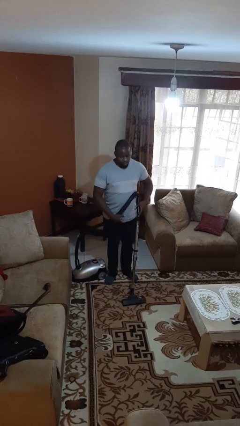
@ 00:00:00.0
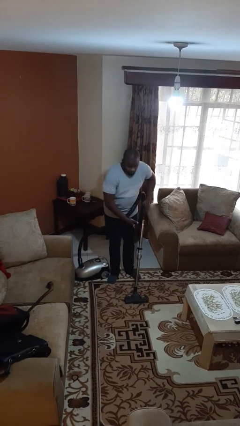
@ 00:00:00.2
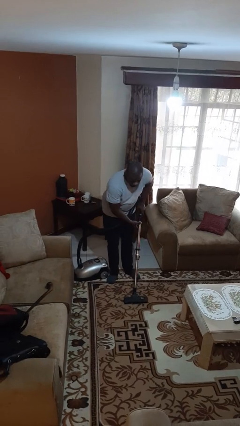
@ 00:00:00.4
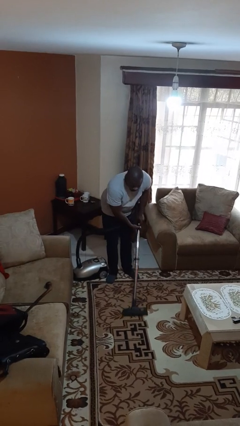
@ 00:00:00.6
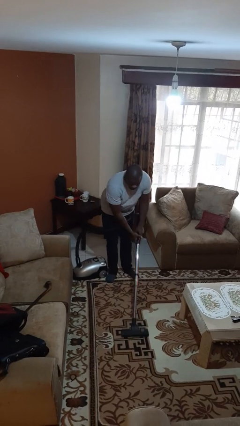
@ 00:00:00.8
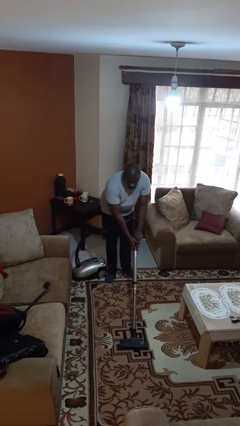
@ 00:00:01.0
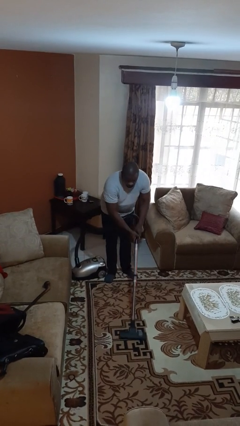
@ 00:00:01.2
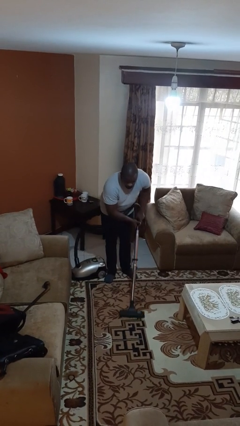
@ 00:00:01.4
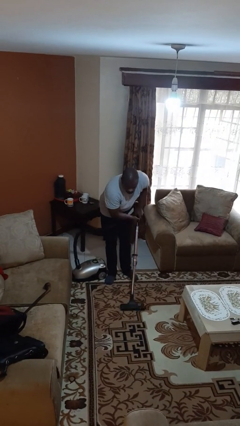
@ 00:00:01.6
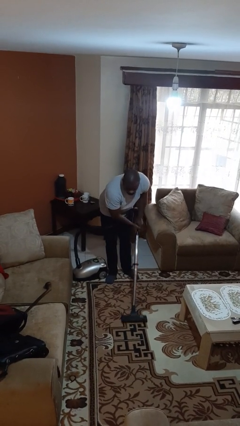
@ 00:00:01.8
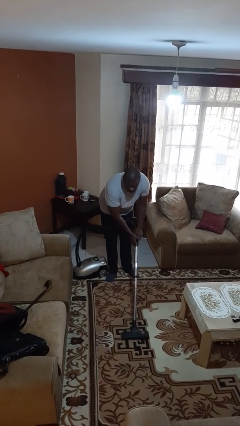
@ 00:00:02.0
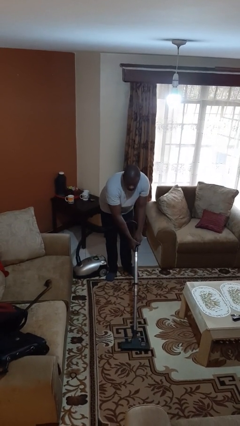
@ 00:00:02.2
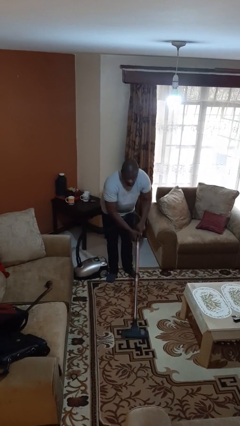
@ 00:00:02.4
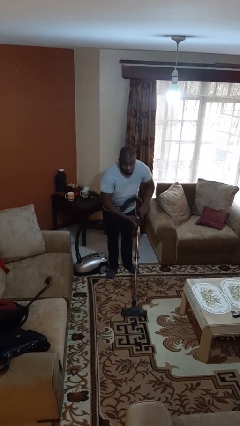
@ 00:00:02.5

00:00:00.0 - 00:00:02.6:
person vacuums carpet

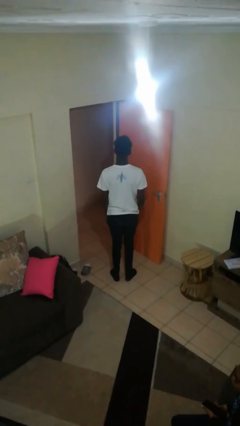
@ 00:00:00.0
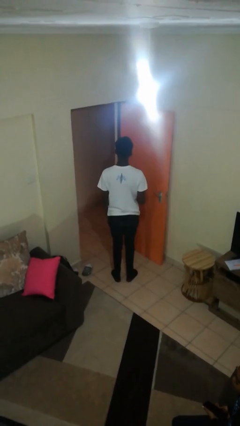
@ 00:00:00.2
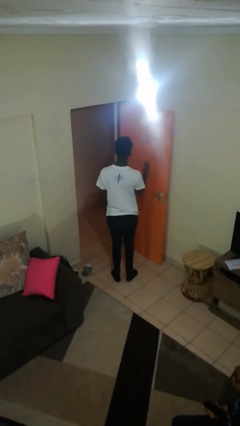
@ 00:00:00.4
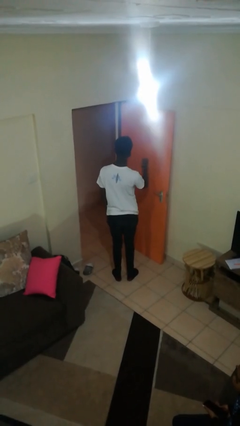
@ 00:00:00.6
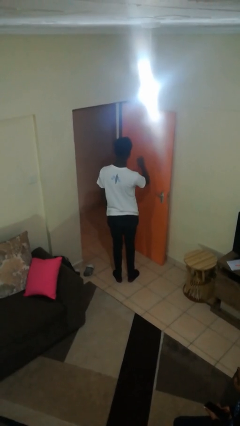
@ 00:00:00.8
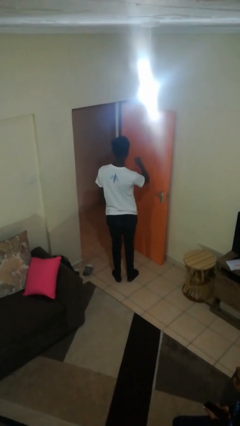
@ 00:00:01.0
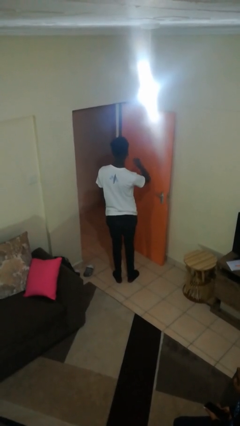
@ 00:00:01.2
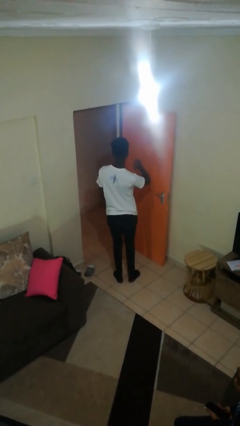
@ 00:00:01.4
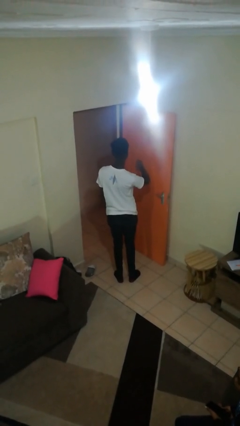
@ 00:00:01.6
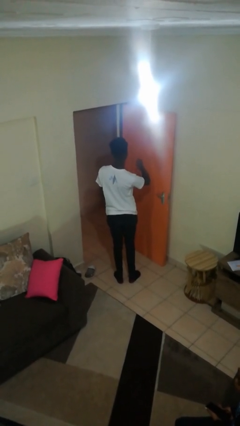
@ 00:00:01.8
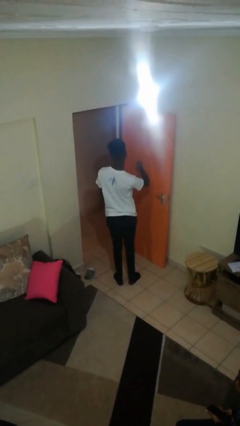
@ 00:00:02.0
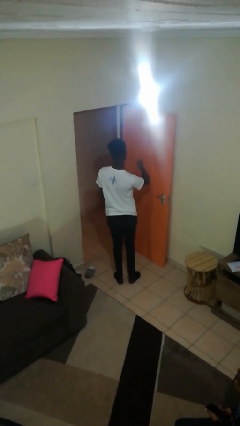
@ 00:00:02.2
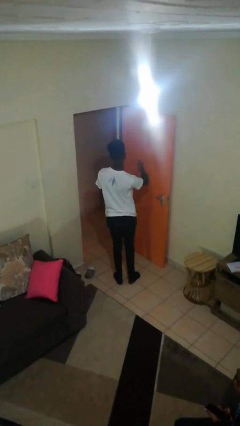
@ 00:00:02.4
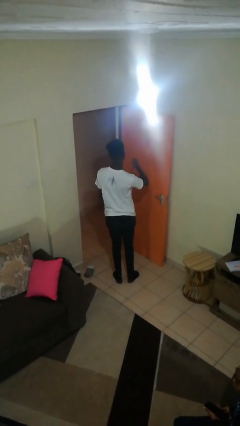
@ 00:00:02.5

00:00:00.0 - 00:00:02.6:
person gestures behind me

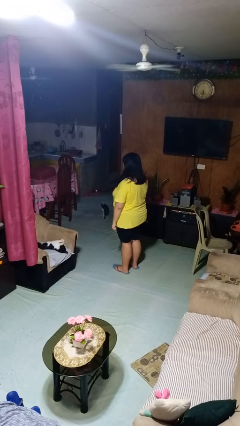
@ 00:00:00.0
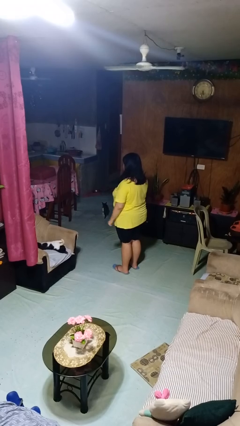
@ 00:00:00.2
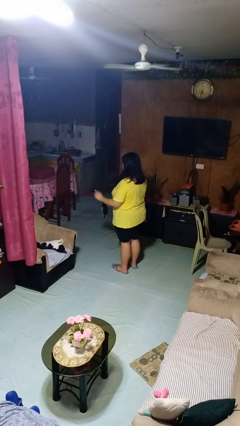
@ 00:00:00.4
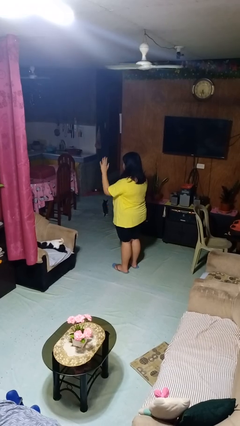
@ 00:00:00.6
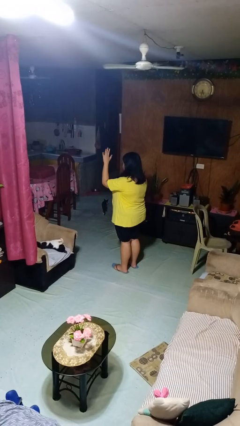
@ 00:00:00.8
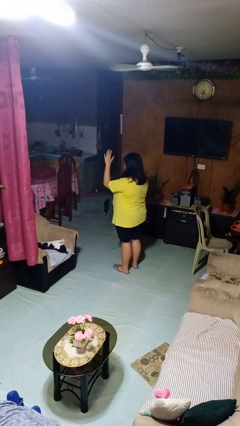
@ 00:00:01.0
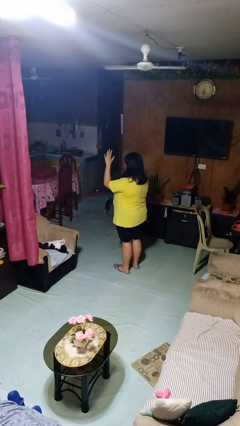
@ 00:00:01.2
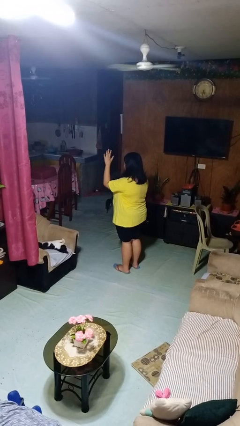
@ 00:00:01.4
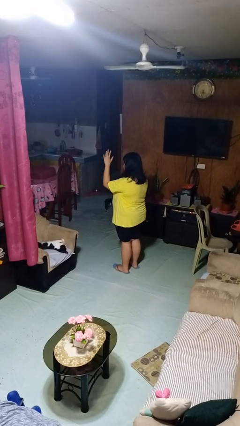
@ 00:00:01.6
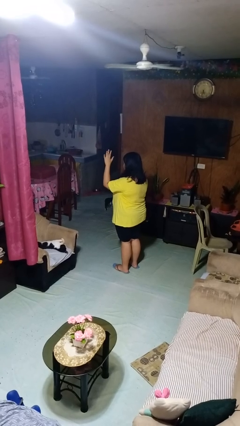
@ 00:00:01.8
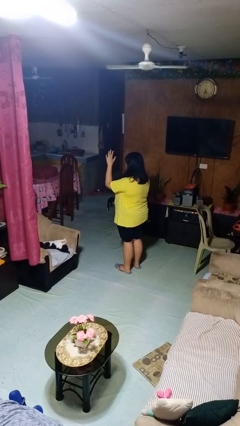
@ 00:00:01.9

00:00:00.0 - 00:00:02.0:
person gestures raise hand

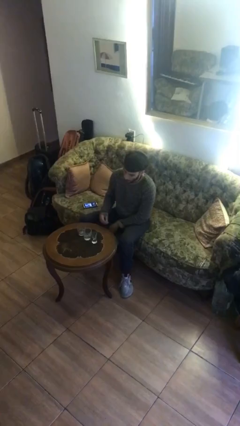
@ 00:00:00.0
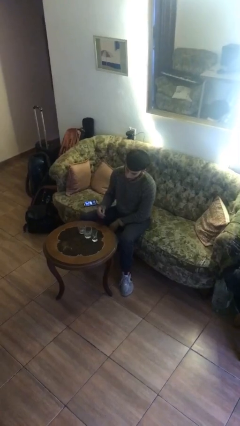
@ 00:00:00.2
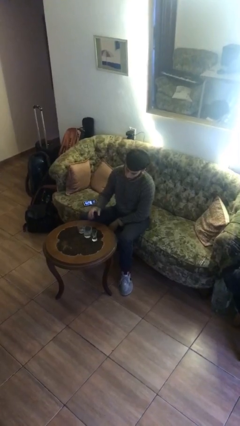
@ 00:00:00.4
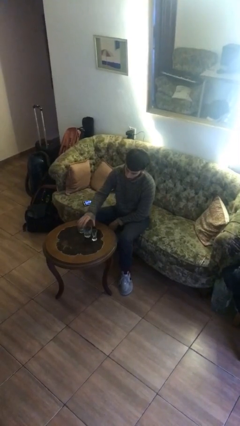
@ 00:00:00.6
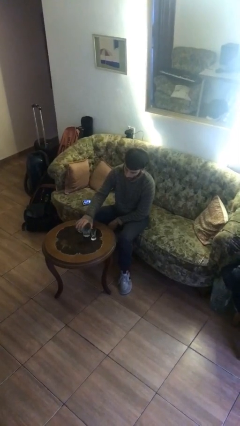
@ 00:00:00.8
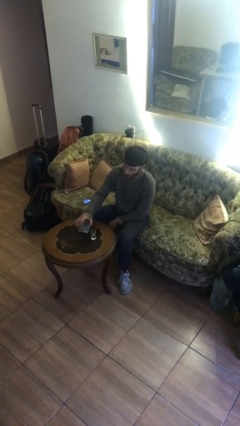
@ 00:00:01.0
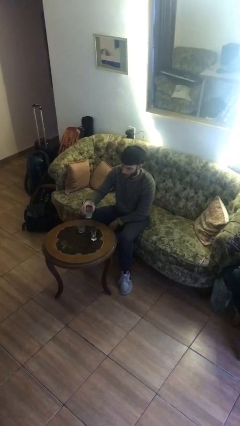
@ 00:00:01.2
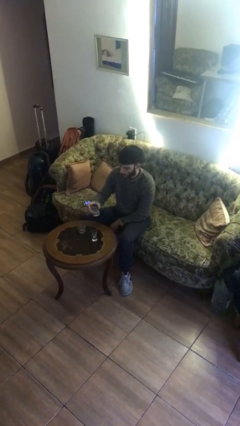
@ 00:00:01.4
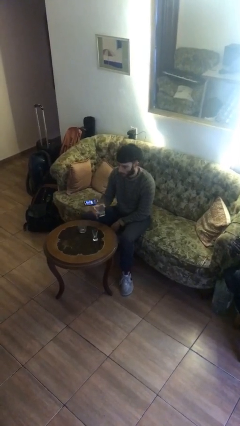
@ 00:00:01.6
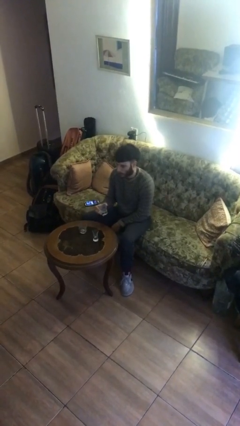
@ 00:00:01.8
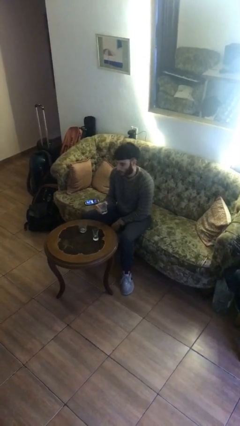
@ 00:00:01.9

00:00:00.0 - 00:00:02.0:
person picks up object from table

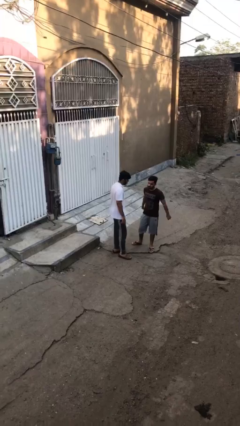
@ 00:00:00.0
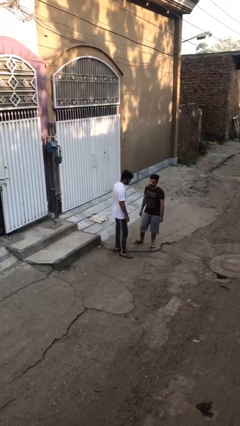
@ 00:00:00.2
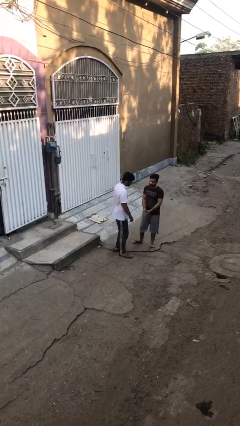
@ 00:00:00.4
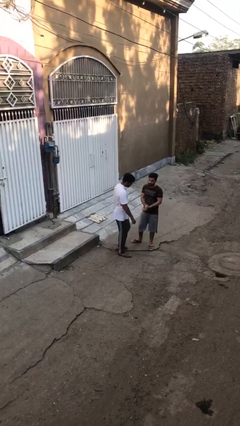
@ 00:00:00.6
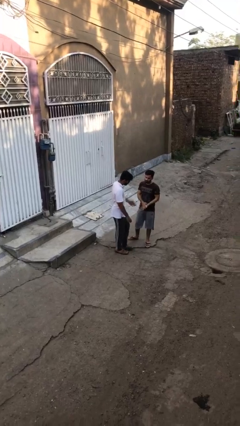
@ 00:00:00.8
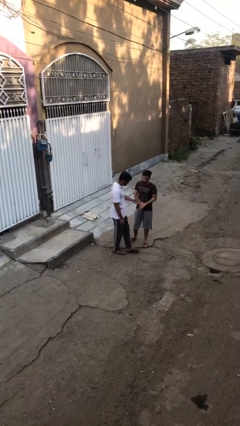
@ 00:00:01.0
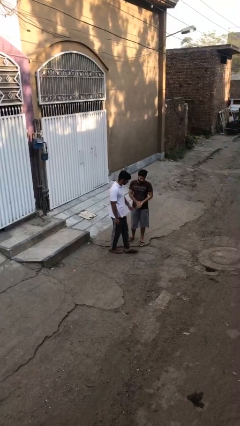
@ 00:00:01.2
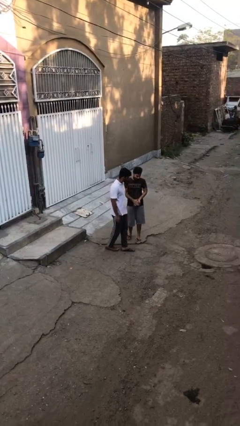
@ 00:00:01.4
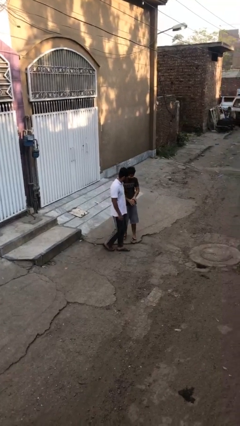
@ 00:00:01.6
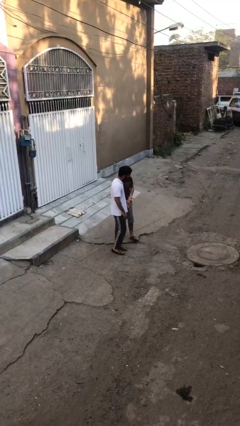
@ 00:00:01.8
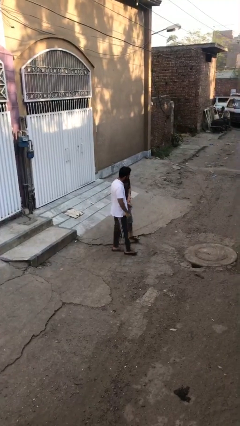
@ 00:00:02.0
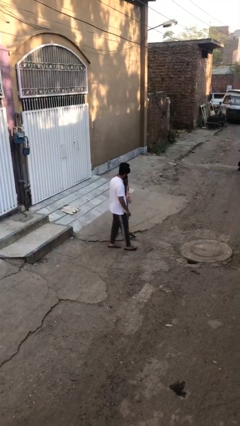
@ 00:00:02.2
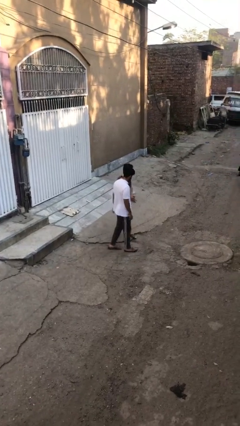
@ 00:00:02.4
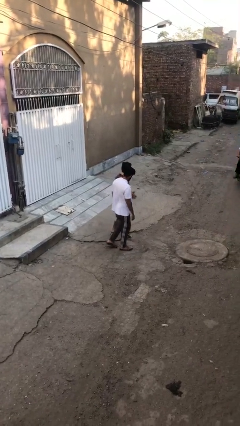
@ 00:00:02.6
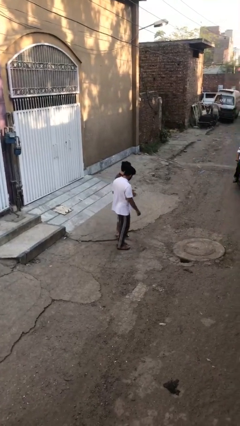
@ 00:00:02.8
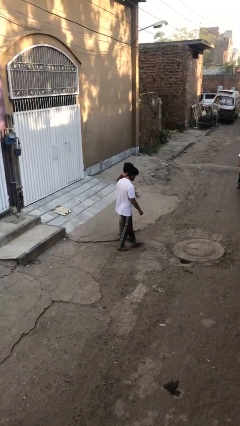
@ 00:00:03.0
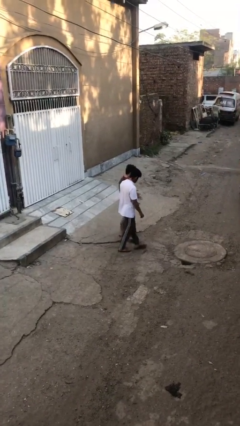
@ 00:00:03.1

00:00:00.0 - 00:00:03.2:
person talks to person

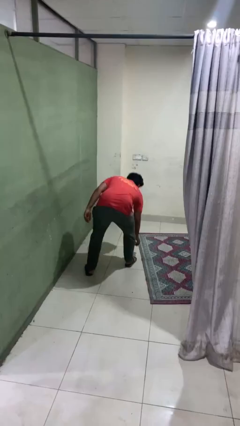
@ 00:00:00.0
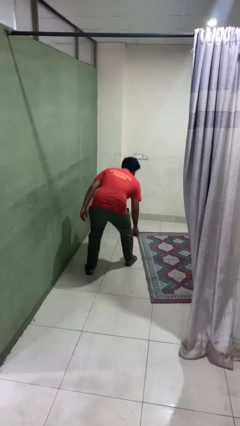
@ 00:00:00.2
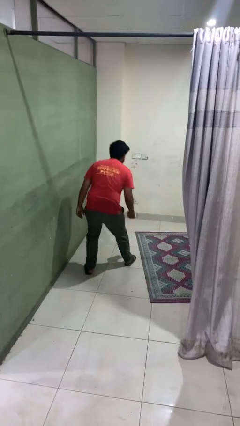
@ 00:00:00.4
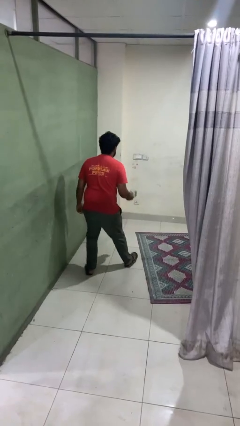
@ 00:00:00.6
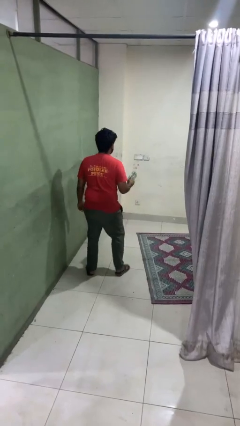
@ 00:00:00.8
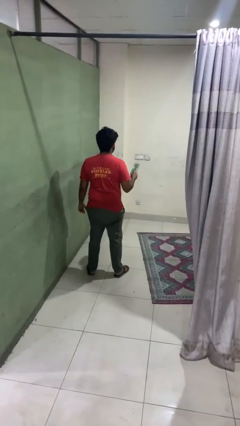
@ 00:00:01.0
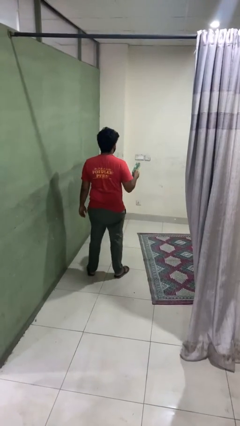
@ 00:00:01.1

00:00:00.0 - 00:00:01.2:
person picks up object from floor

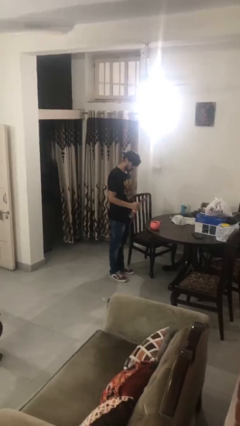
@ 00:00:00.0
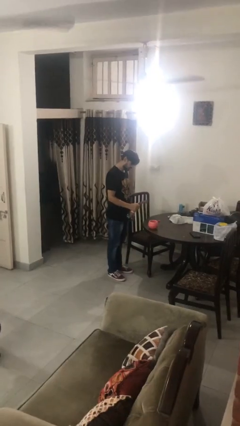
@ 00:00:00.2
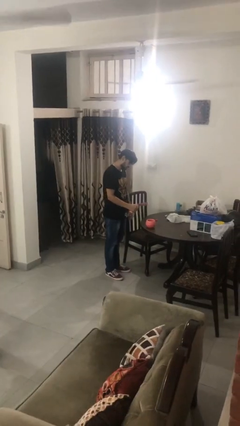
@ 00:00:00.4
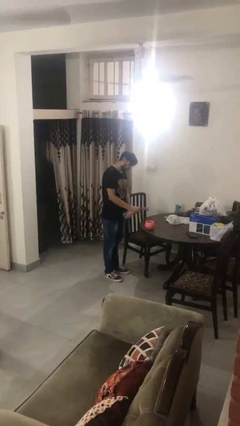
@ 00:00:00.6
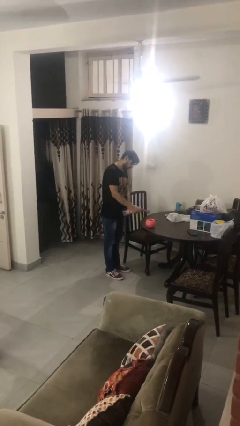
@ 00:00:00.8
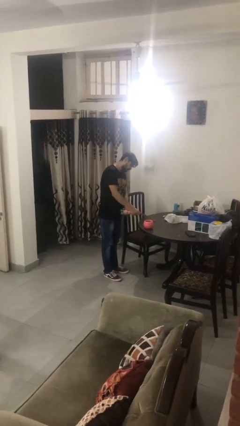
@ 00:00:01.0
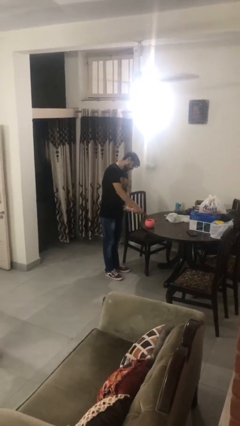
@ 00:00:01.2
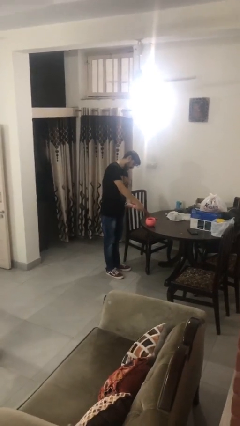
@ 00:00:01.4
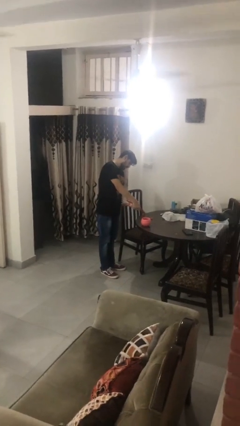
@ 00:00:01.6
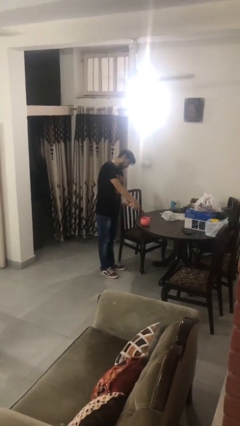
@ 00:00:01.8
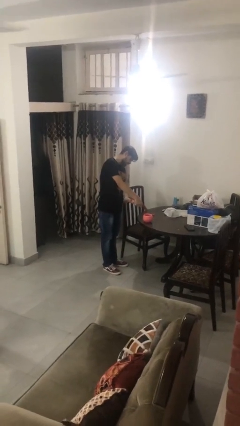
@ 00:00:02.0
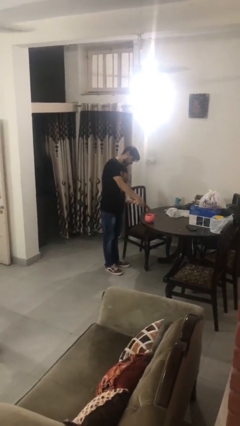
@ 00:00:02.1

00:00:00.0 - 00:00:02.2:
person waters houseplant

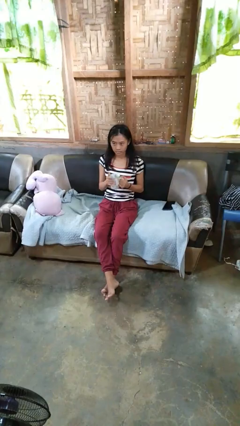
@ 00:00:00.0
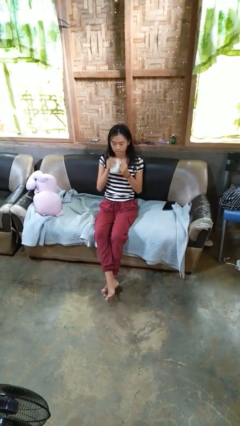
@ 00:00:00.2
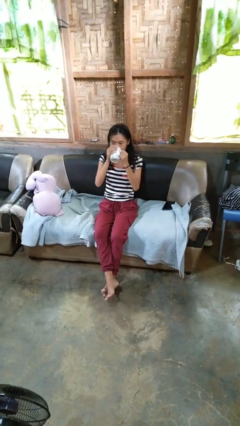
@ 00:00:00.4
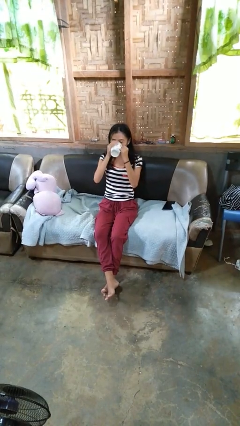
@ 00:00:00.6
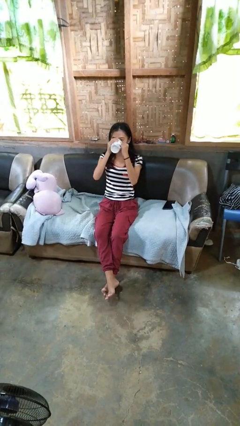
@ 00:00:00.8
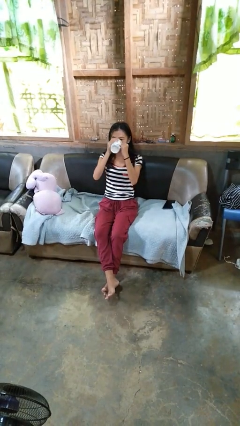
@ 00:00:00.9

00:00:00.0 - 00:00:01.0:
person drinks from mug
